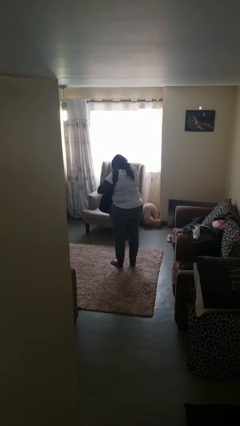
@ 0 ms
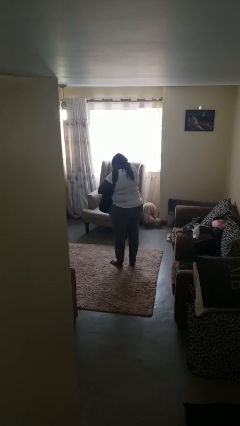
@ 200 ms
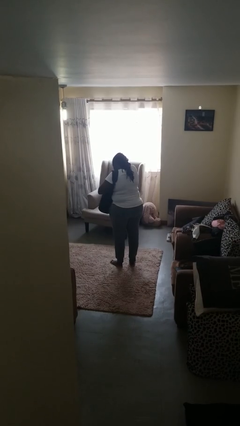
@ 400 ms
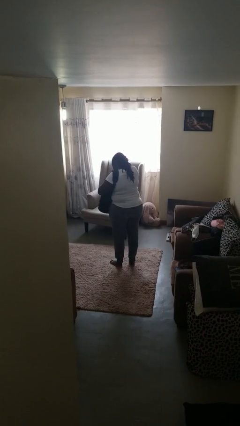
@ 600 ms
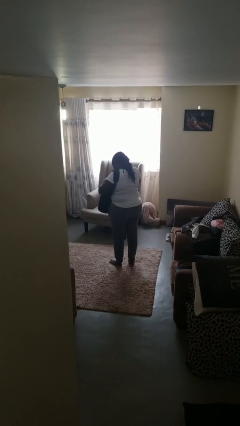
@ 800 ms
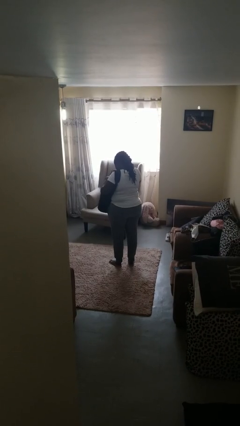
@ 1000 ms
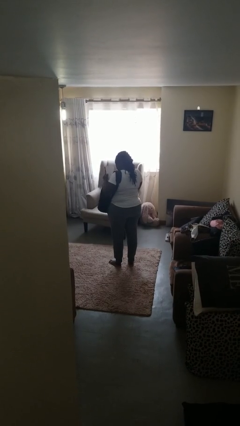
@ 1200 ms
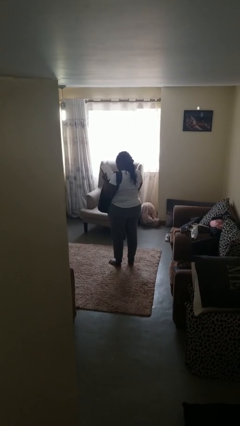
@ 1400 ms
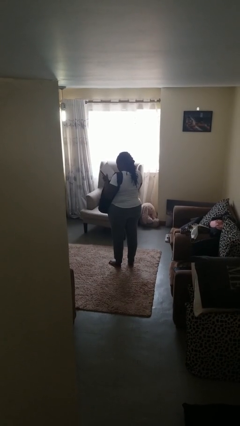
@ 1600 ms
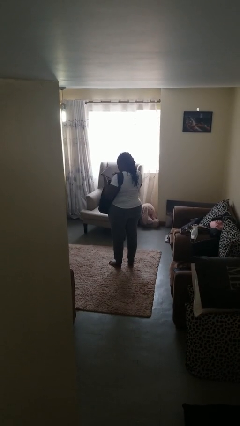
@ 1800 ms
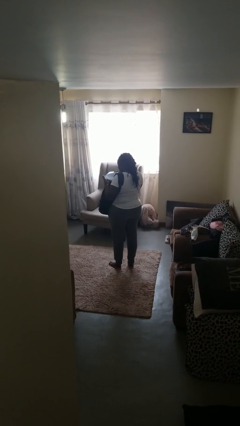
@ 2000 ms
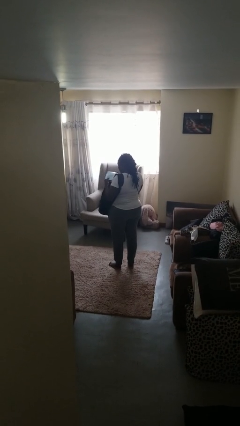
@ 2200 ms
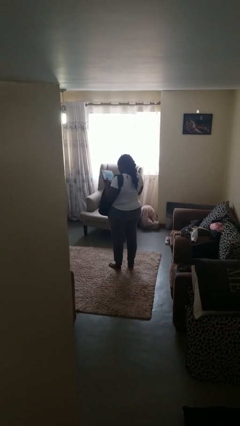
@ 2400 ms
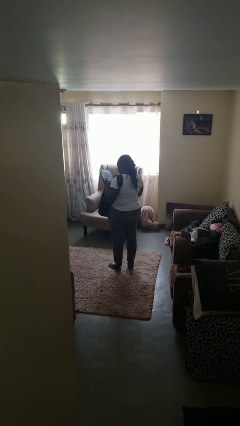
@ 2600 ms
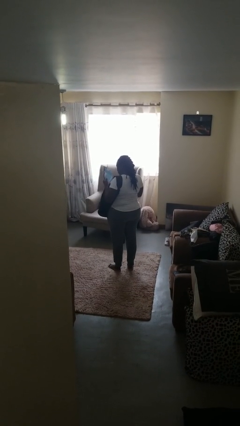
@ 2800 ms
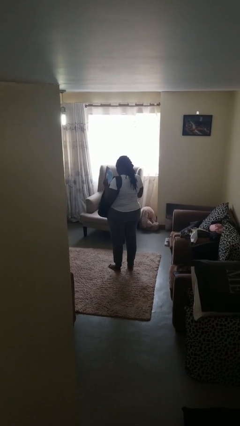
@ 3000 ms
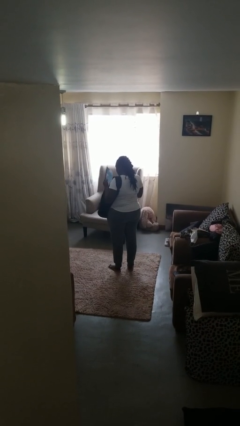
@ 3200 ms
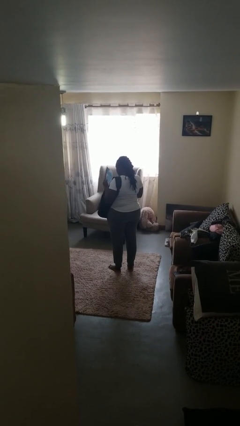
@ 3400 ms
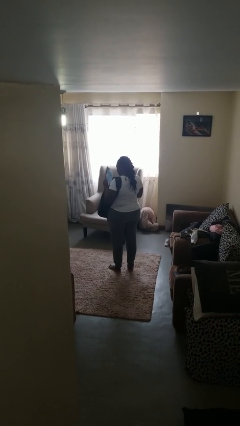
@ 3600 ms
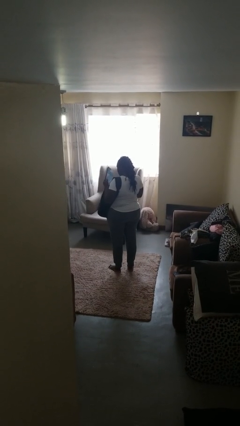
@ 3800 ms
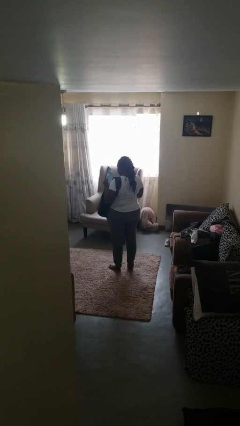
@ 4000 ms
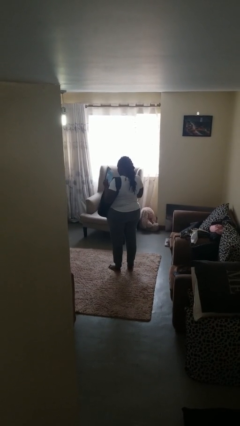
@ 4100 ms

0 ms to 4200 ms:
person takes object from backpack

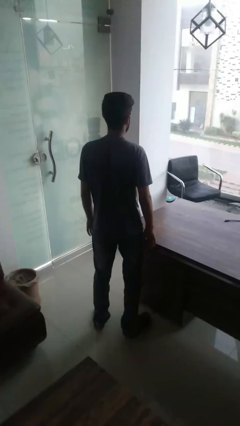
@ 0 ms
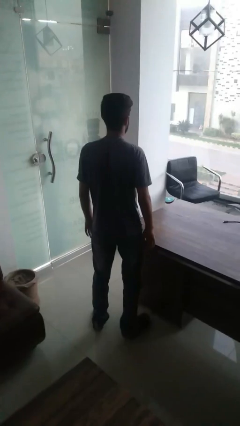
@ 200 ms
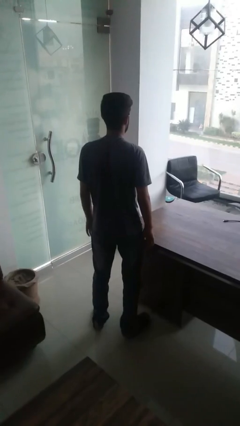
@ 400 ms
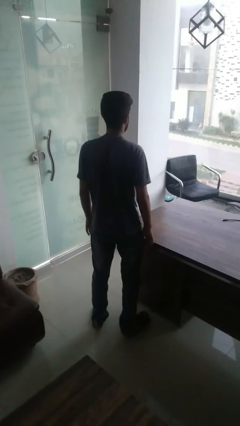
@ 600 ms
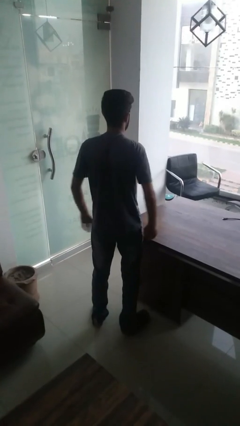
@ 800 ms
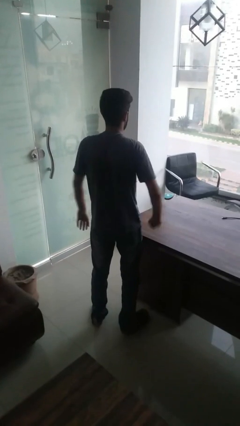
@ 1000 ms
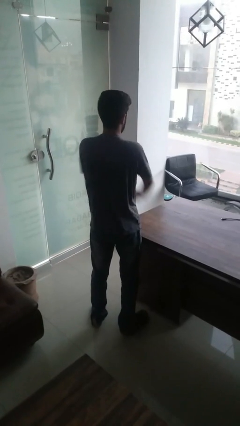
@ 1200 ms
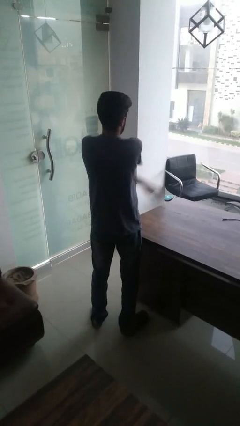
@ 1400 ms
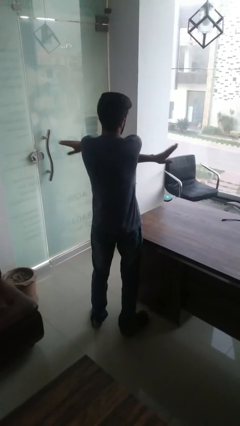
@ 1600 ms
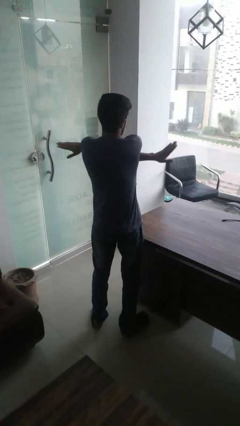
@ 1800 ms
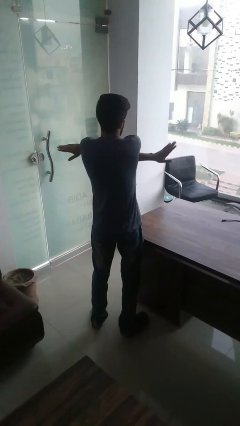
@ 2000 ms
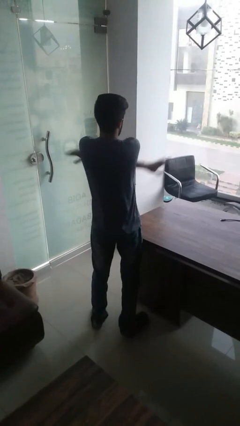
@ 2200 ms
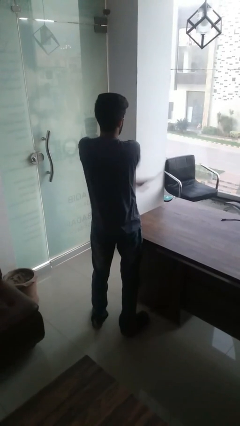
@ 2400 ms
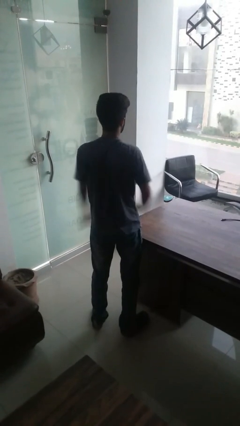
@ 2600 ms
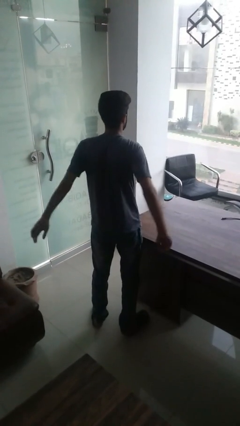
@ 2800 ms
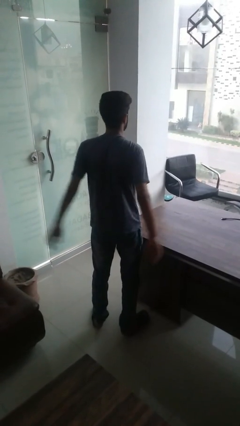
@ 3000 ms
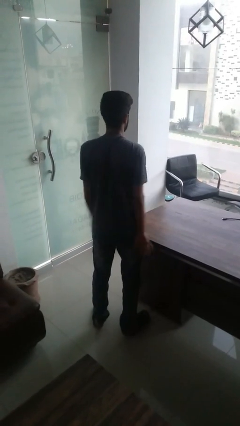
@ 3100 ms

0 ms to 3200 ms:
person gestures arms x

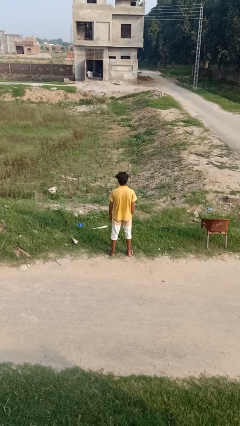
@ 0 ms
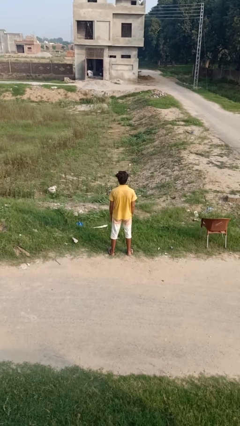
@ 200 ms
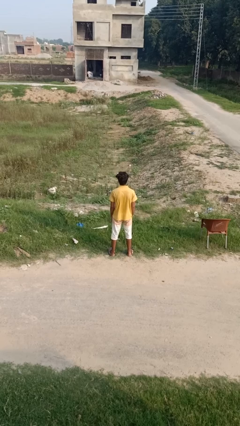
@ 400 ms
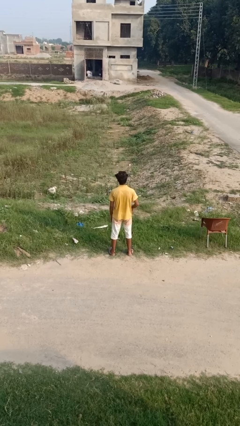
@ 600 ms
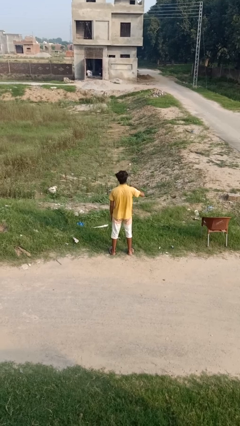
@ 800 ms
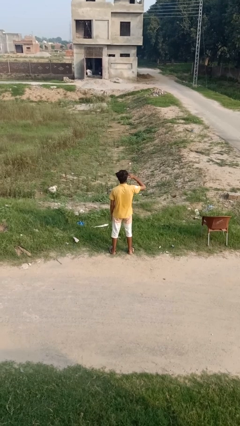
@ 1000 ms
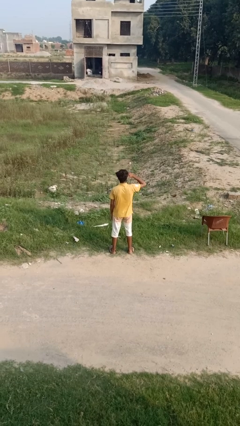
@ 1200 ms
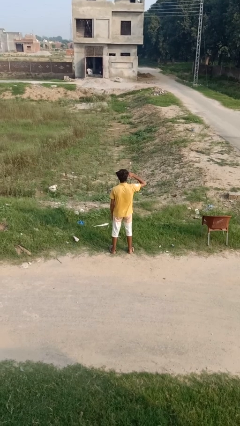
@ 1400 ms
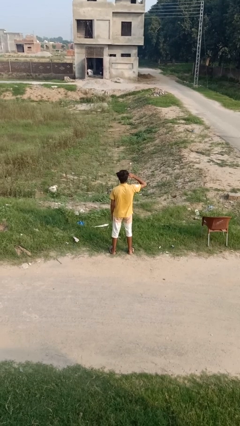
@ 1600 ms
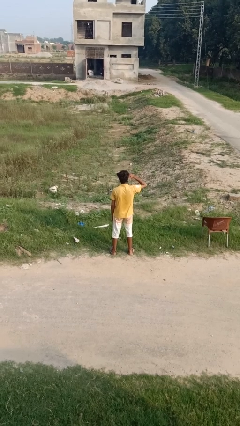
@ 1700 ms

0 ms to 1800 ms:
person shades eyes

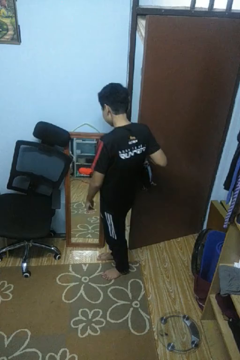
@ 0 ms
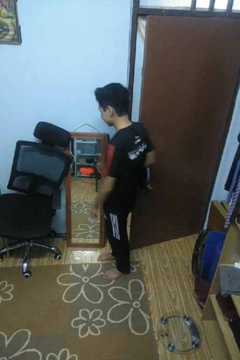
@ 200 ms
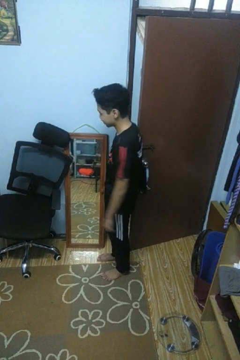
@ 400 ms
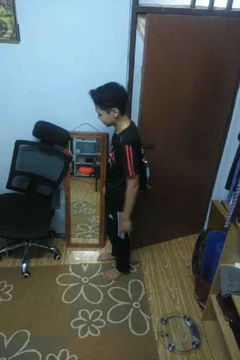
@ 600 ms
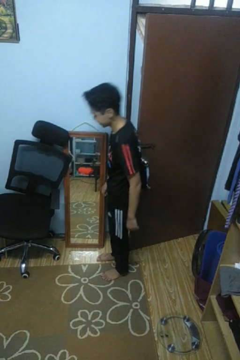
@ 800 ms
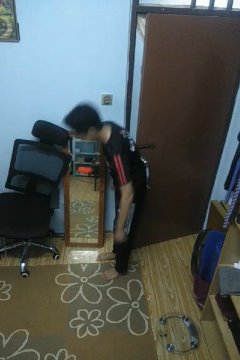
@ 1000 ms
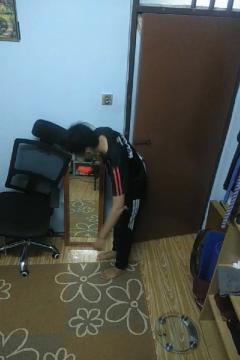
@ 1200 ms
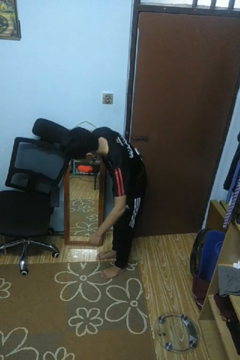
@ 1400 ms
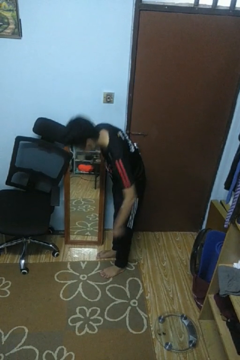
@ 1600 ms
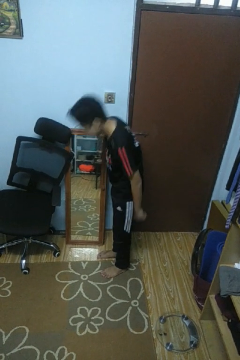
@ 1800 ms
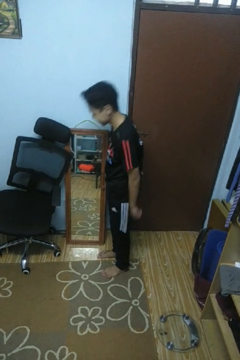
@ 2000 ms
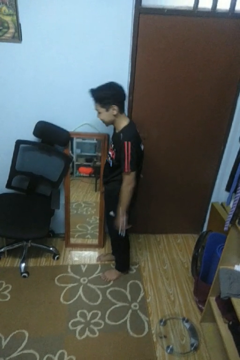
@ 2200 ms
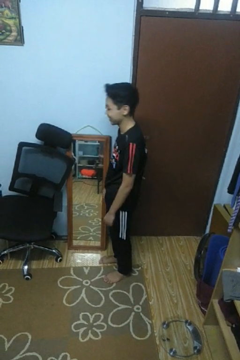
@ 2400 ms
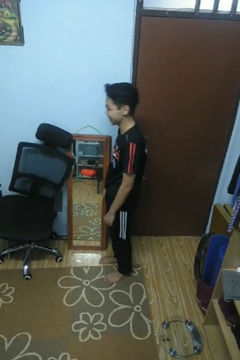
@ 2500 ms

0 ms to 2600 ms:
person closes door with hip

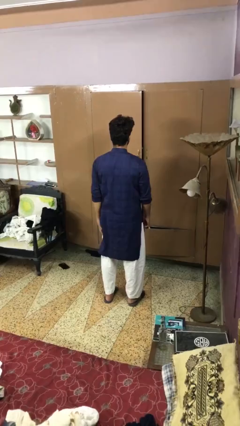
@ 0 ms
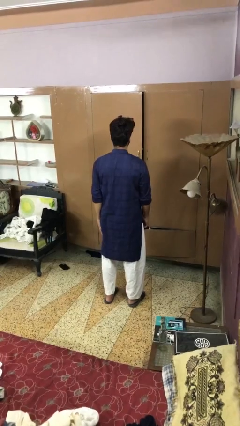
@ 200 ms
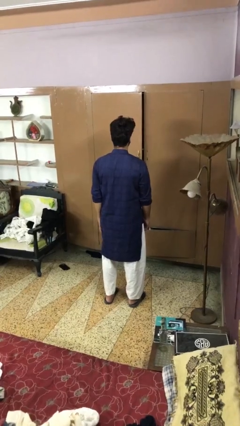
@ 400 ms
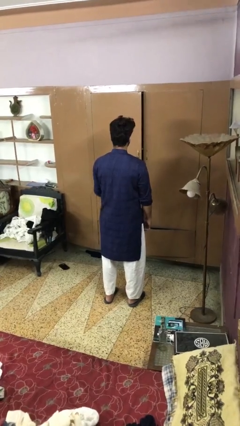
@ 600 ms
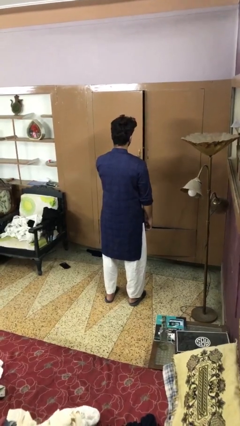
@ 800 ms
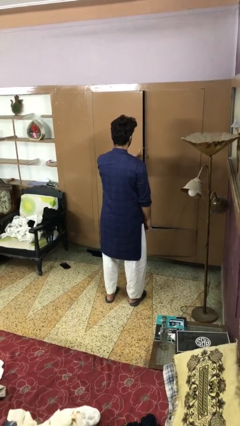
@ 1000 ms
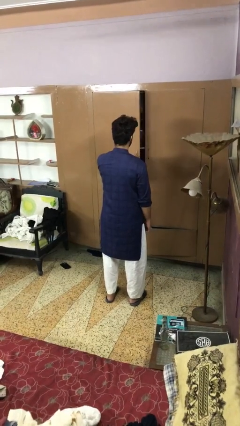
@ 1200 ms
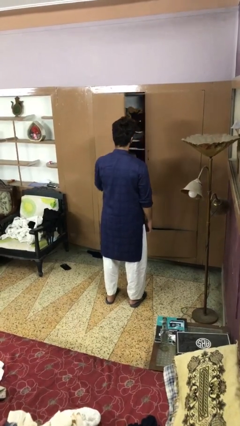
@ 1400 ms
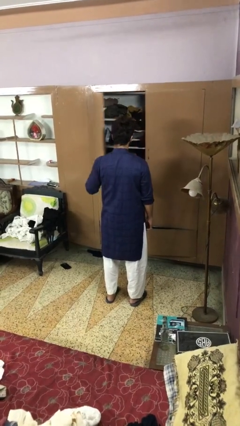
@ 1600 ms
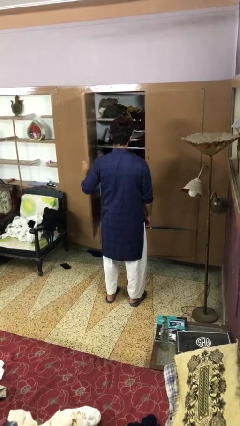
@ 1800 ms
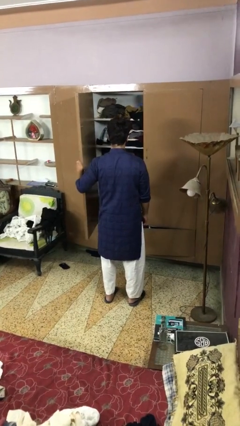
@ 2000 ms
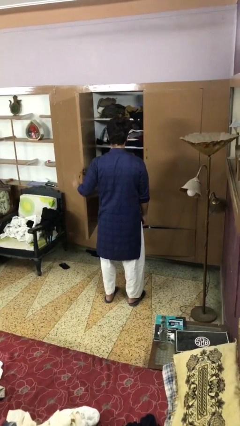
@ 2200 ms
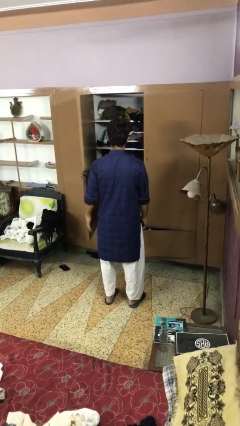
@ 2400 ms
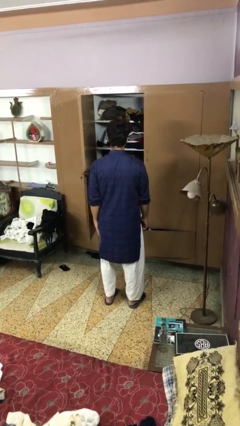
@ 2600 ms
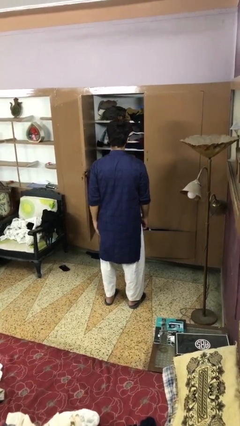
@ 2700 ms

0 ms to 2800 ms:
person opens closet door

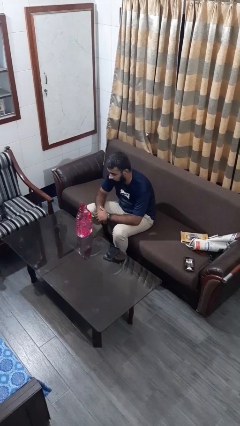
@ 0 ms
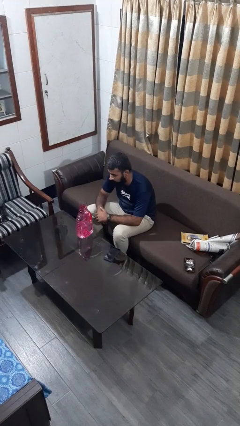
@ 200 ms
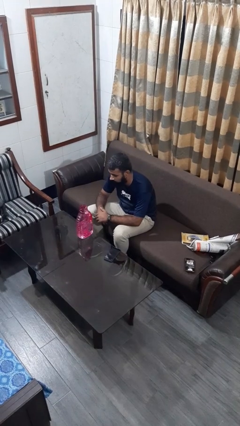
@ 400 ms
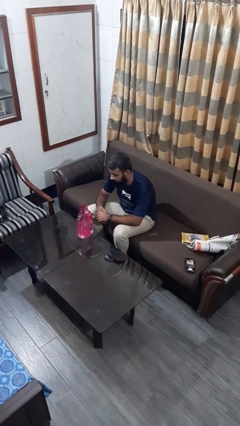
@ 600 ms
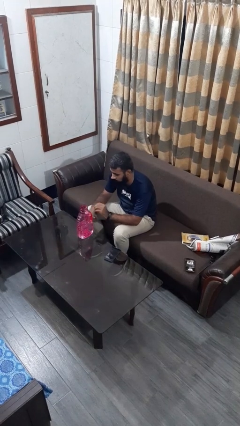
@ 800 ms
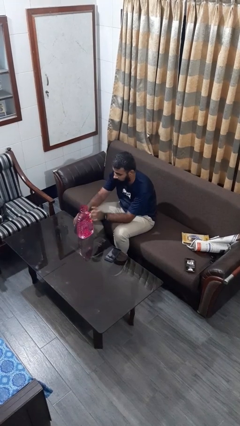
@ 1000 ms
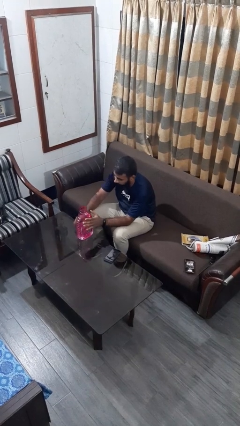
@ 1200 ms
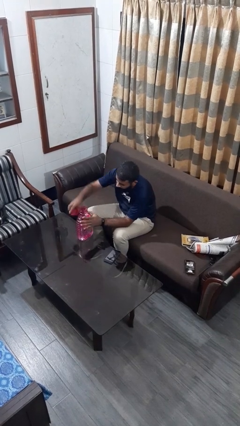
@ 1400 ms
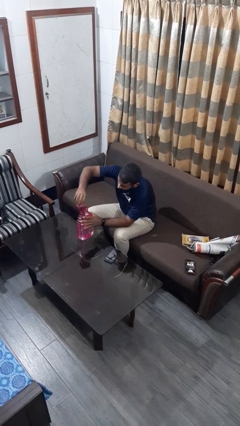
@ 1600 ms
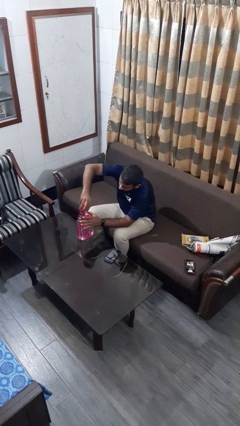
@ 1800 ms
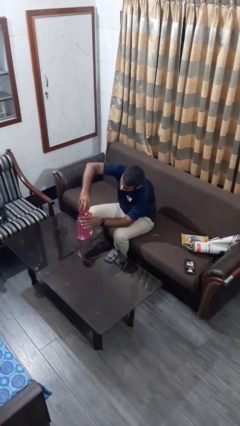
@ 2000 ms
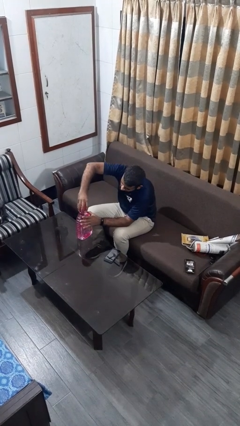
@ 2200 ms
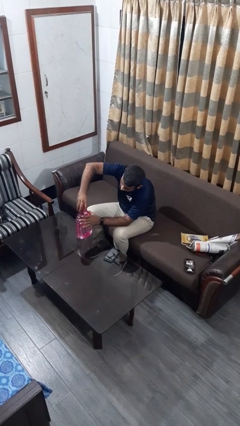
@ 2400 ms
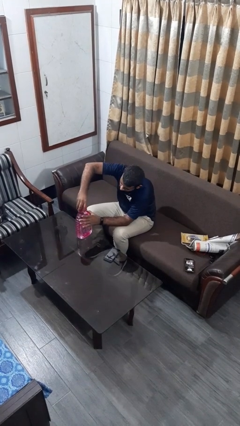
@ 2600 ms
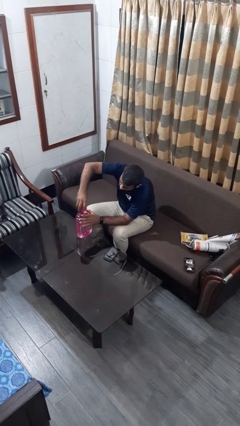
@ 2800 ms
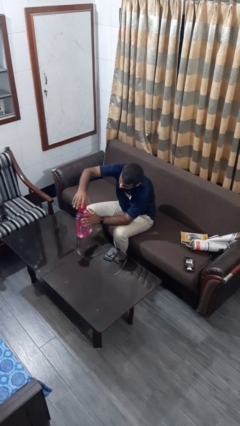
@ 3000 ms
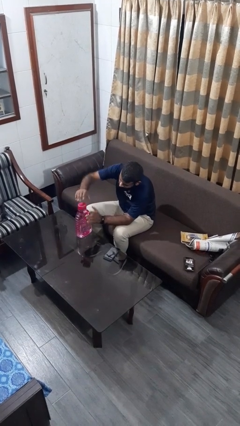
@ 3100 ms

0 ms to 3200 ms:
person screws lid to bottle
